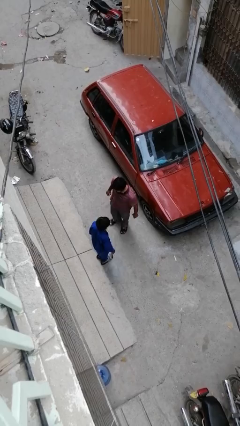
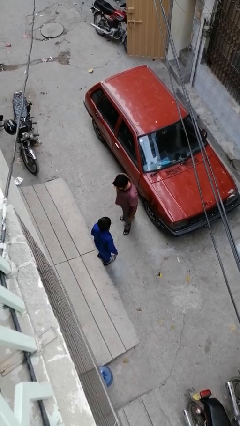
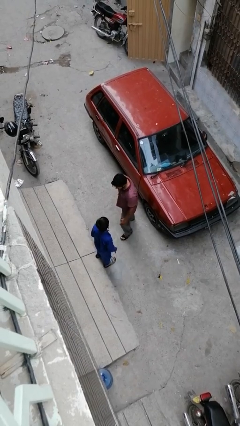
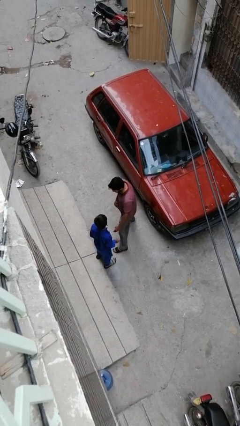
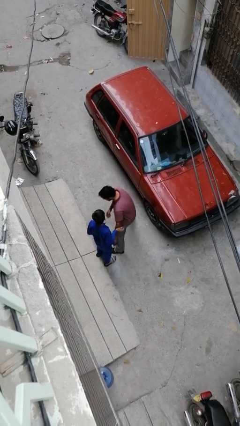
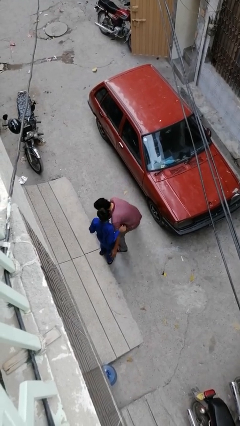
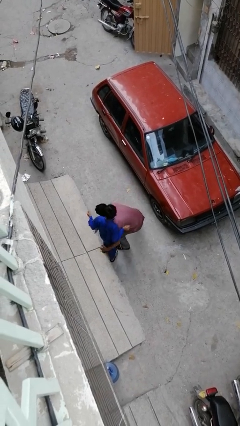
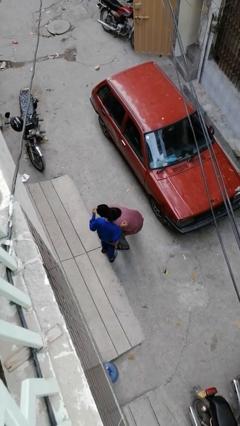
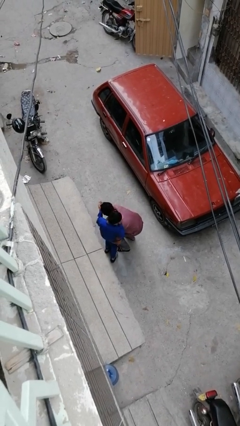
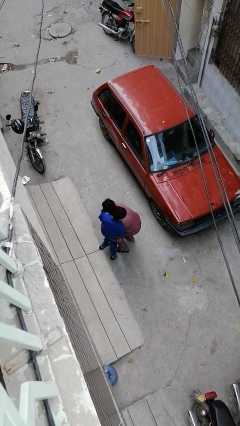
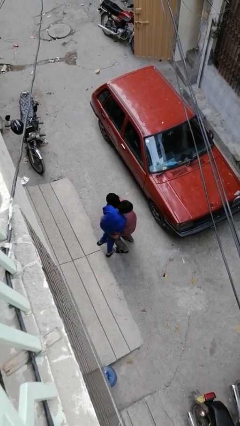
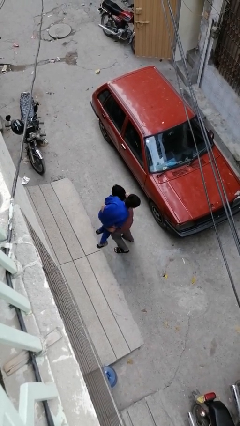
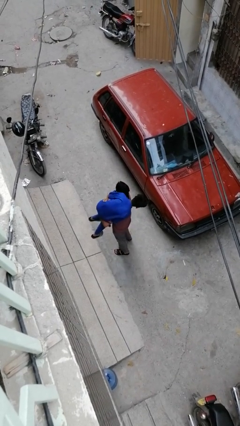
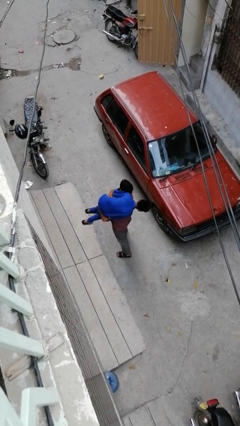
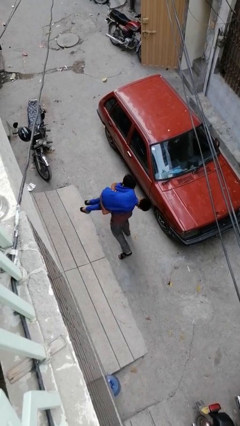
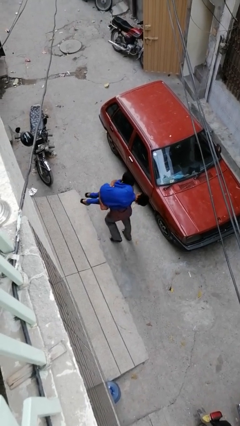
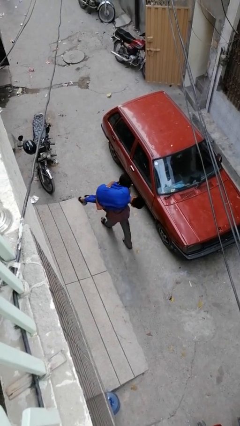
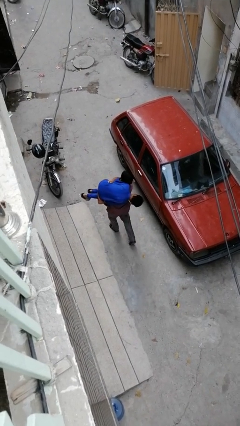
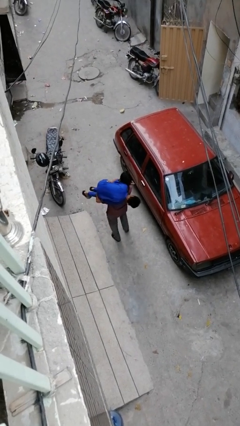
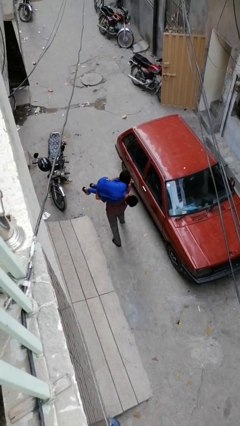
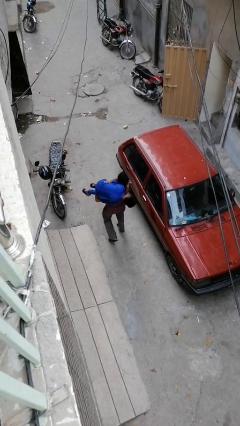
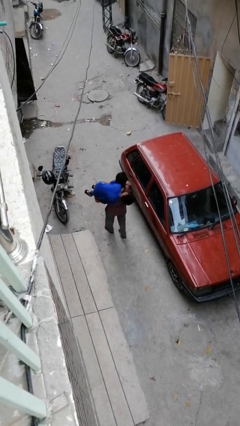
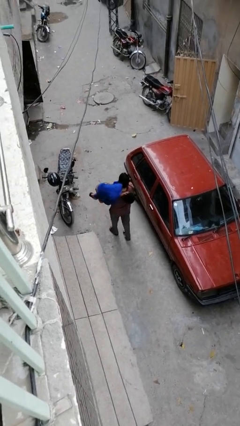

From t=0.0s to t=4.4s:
person carries person over shoulder

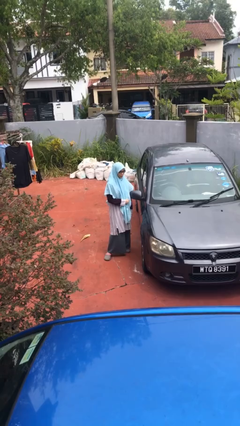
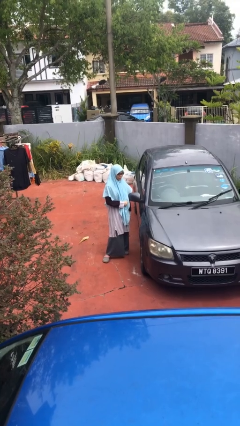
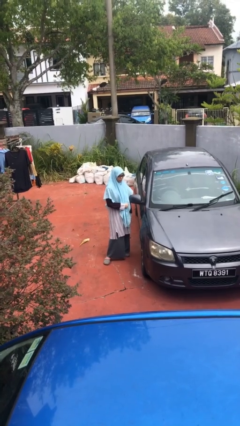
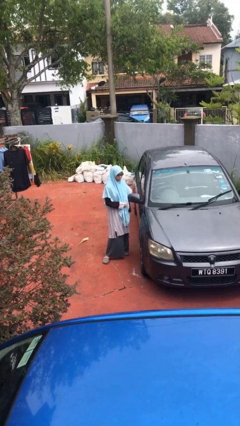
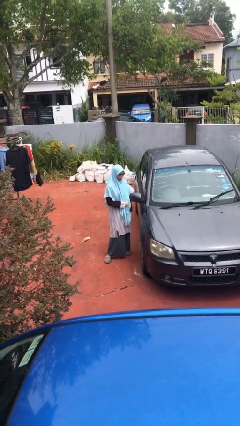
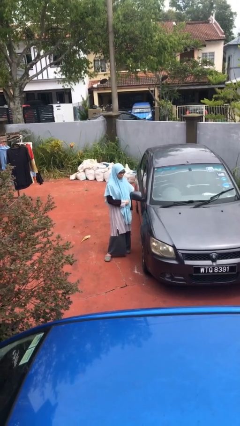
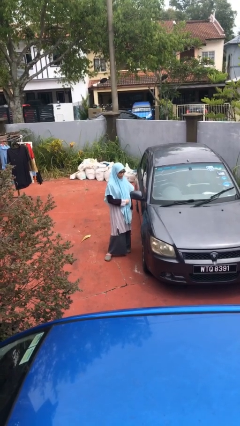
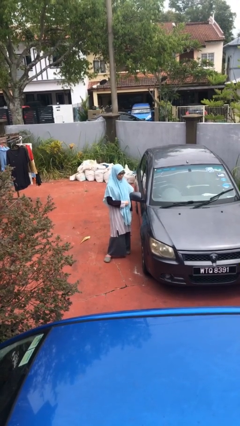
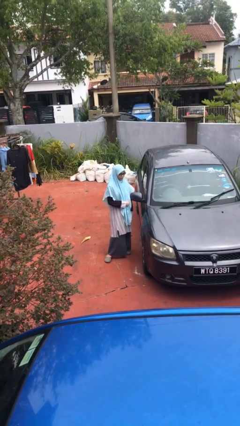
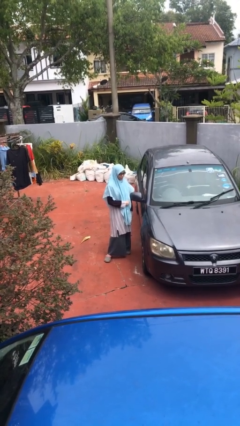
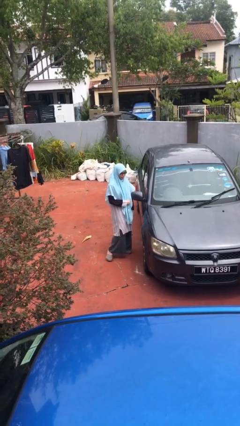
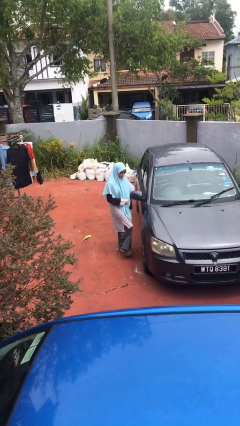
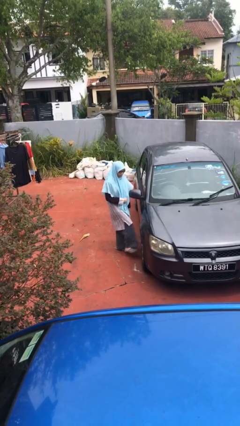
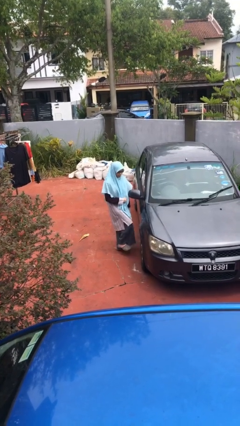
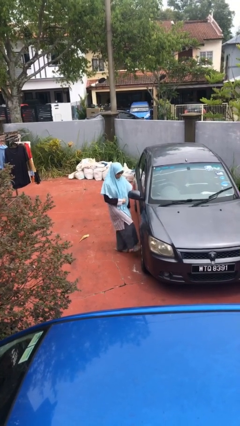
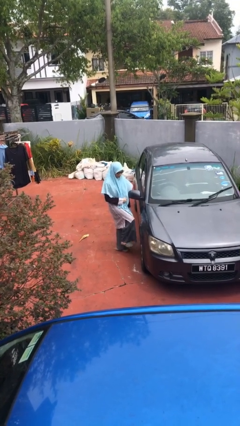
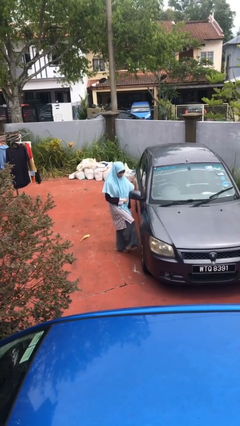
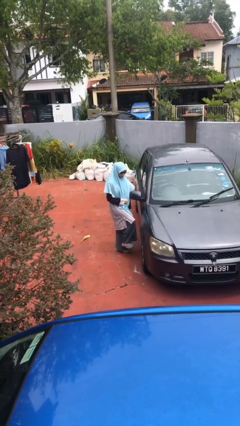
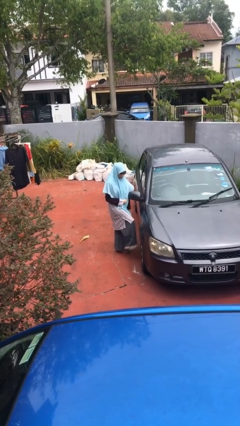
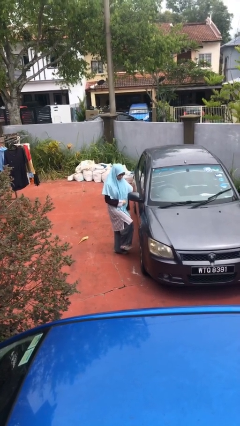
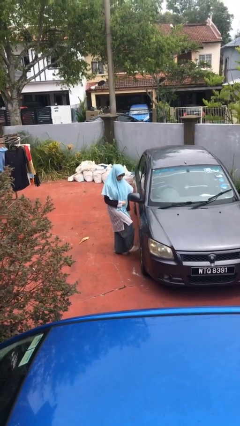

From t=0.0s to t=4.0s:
person kicks car tires

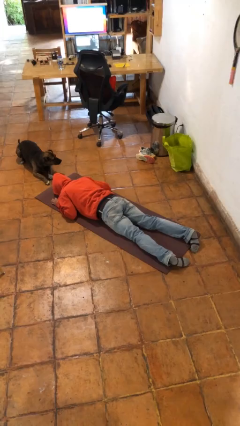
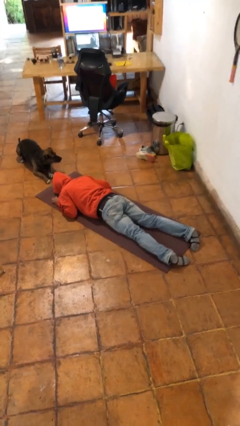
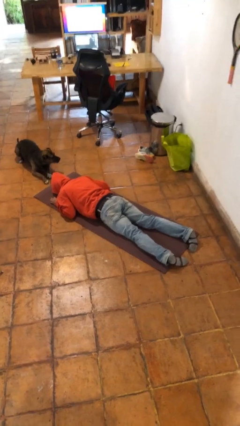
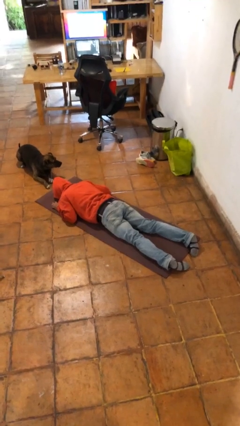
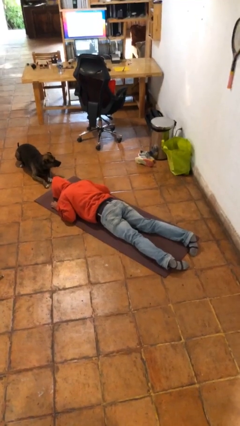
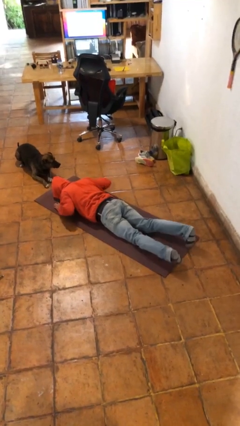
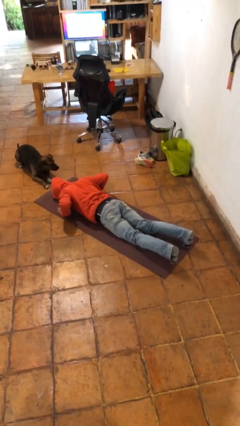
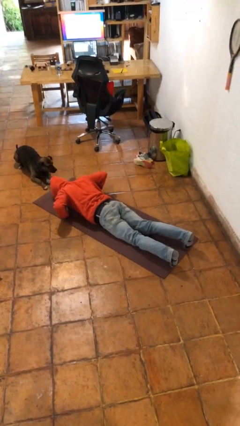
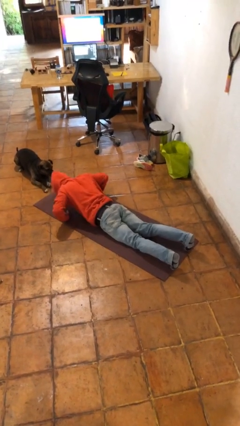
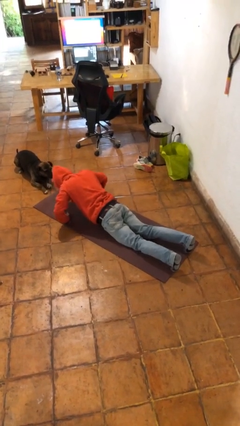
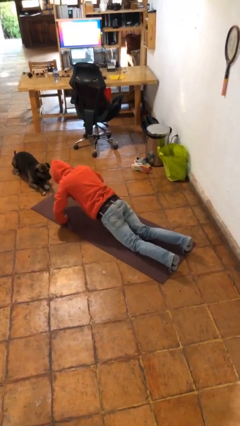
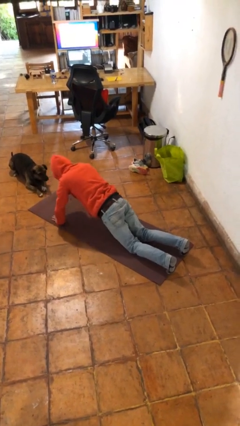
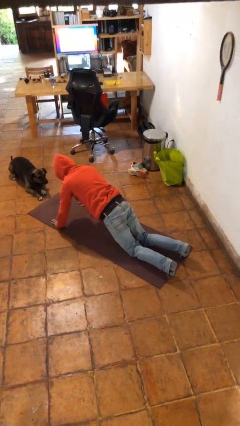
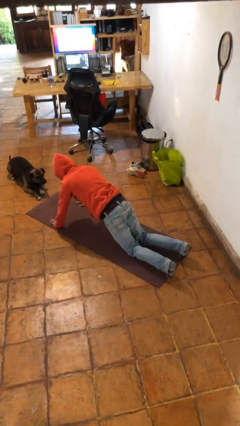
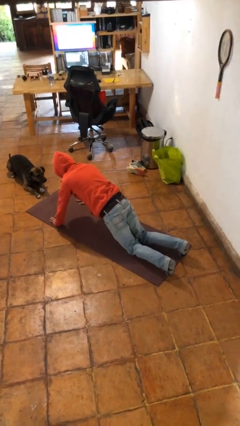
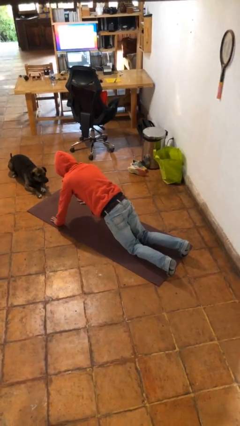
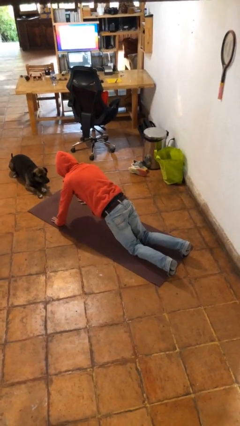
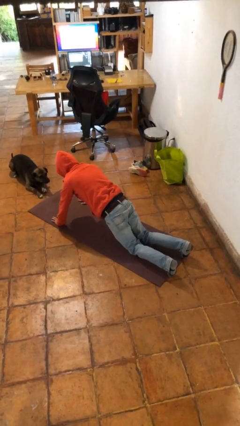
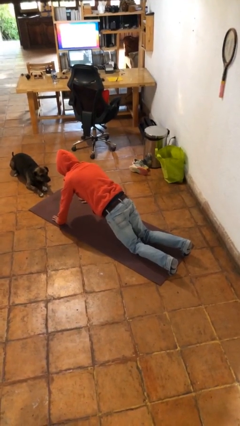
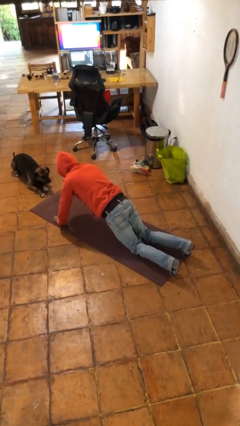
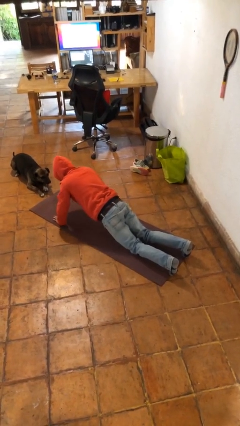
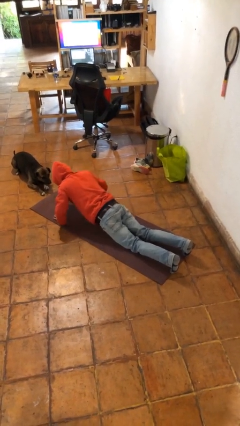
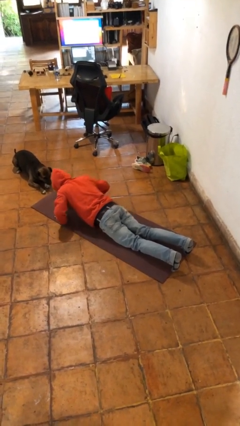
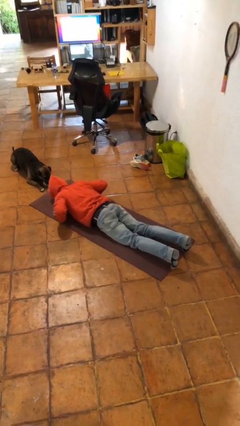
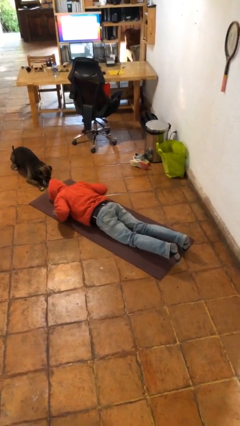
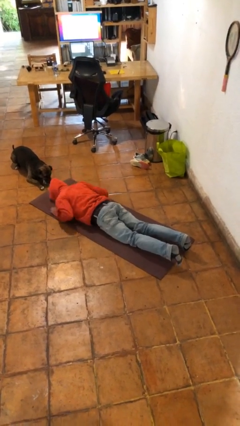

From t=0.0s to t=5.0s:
person exercises with pushup

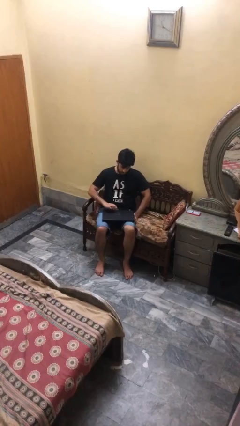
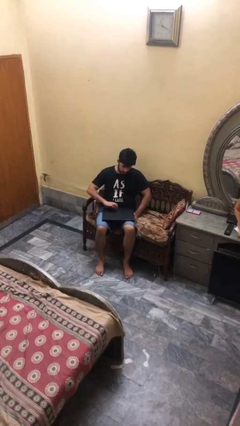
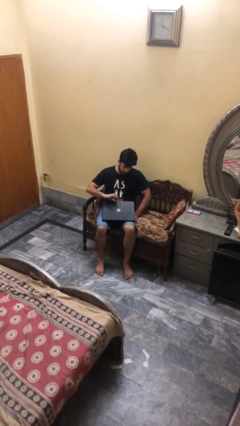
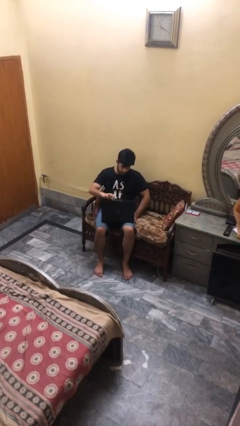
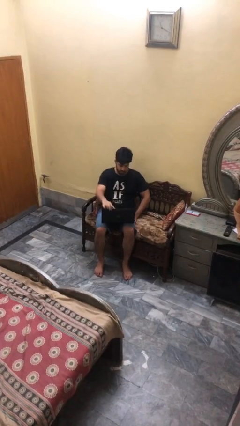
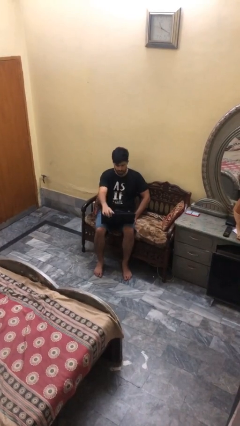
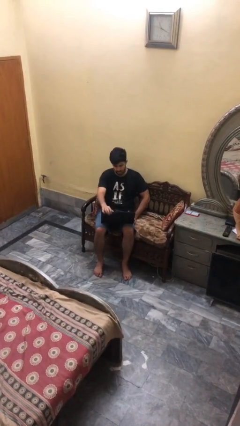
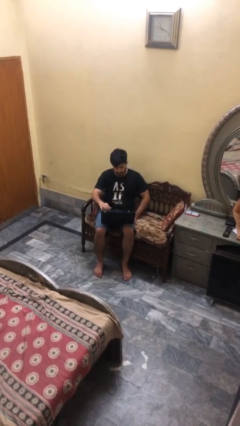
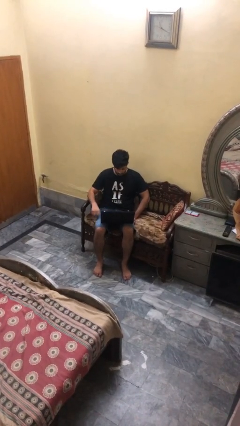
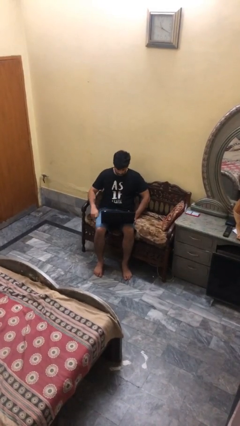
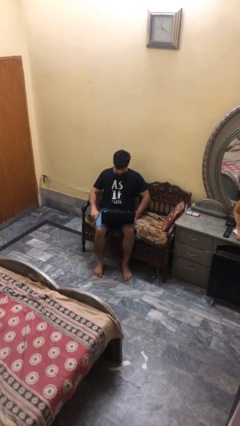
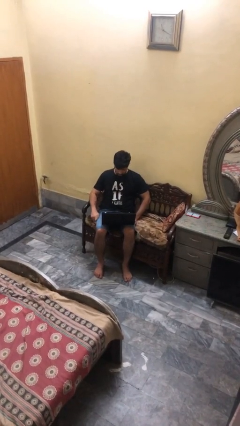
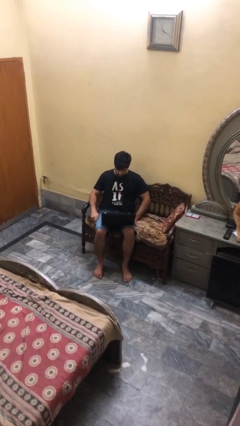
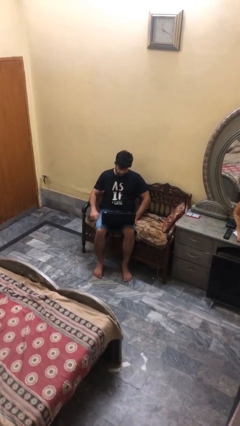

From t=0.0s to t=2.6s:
person opens laptop

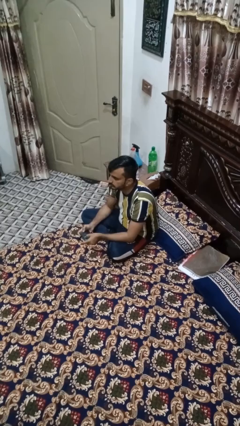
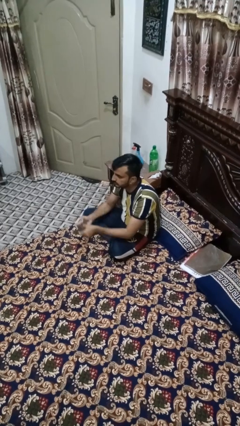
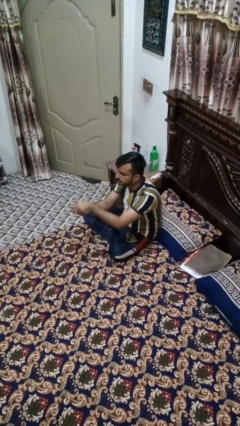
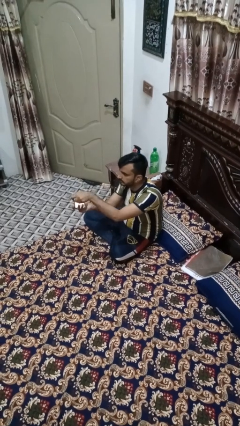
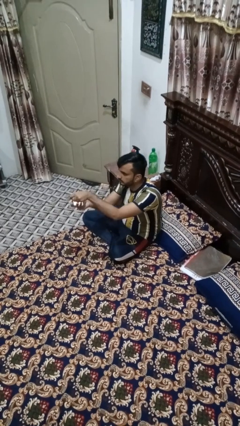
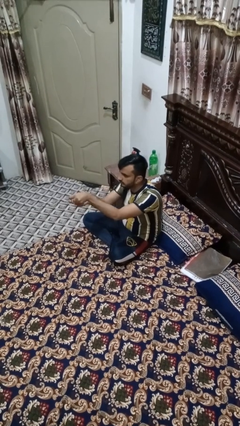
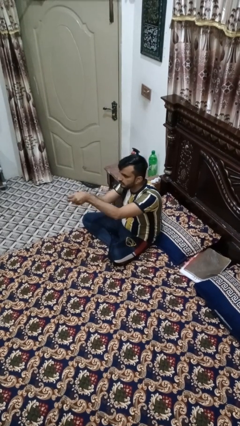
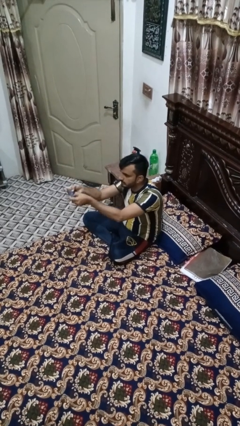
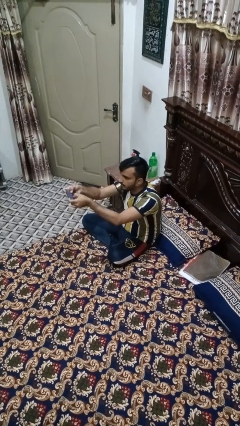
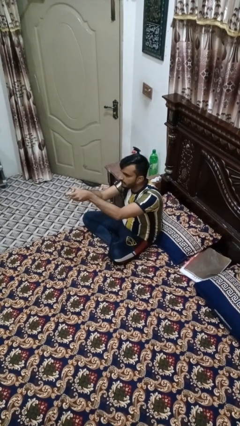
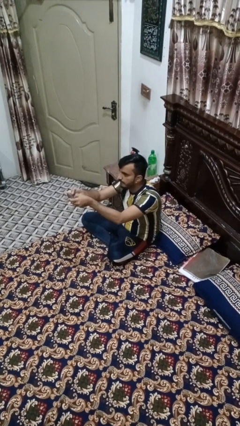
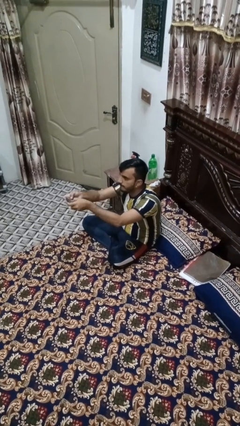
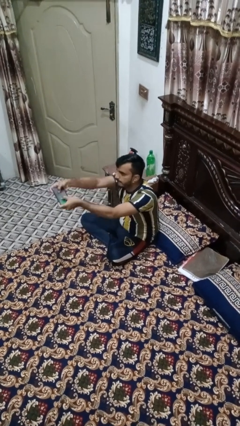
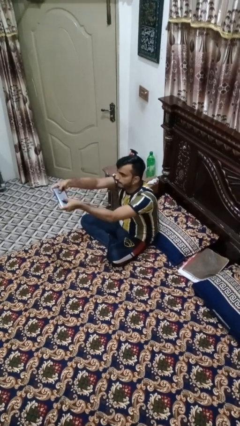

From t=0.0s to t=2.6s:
person interacts with handheld game
